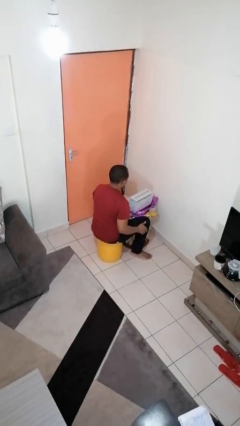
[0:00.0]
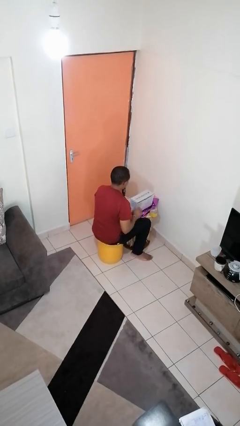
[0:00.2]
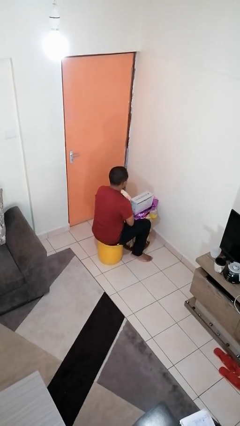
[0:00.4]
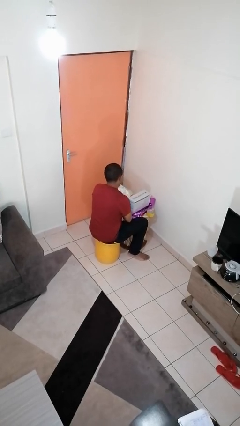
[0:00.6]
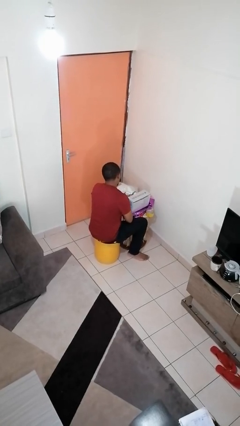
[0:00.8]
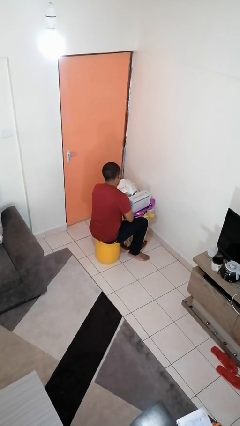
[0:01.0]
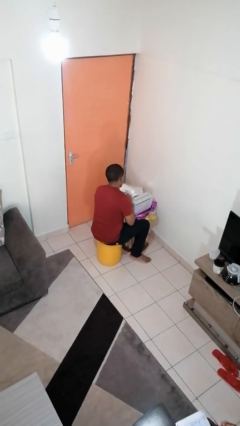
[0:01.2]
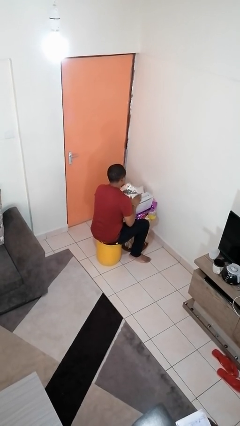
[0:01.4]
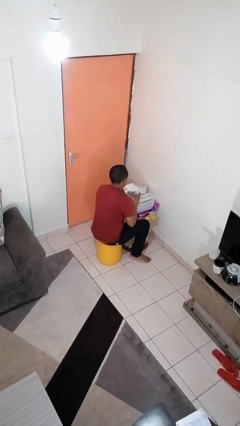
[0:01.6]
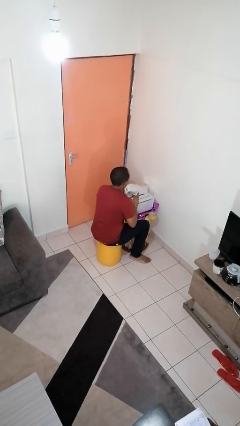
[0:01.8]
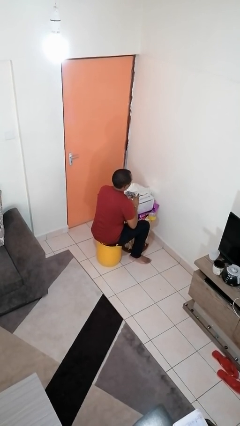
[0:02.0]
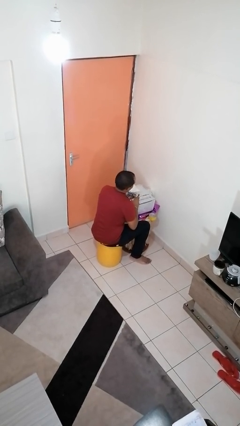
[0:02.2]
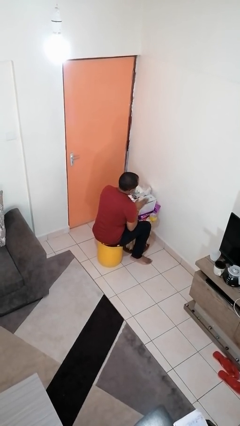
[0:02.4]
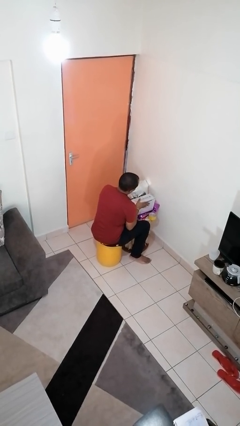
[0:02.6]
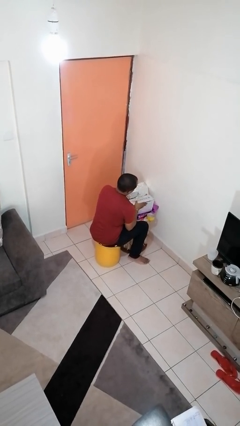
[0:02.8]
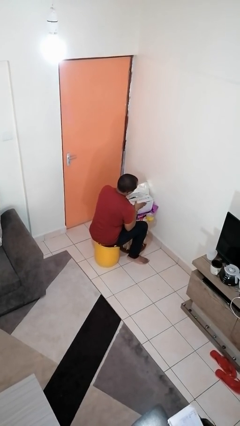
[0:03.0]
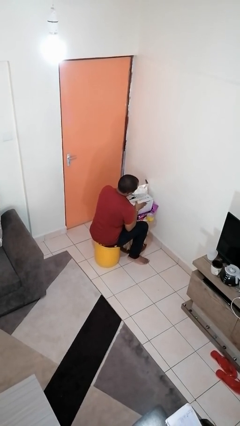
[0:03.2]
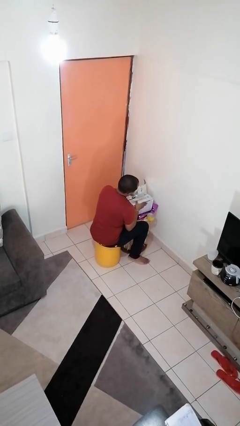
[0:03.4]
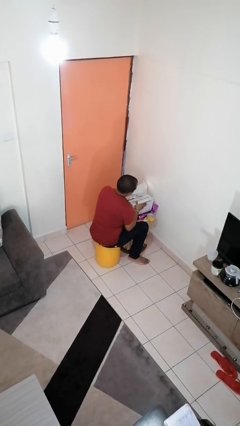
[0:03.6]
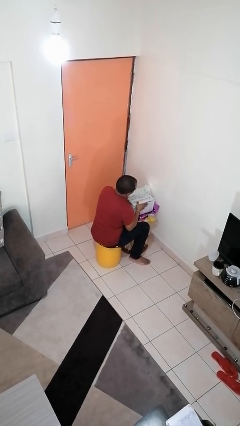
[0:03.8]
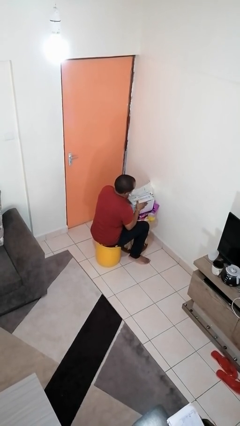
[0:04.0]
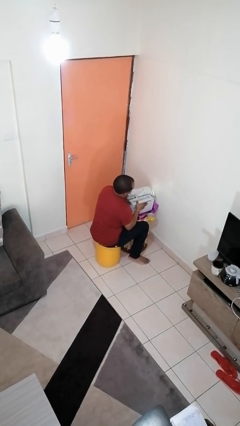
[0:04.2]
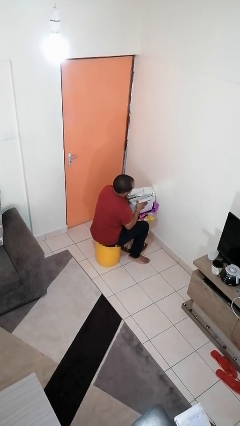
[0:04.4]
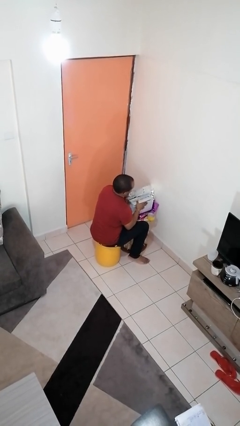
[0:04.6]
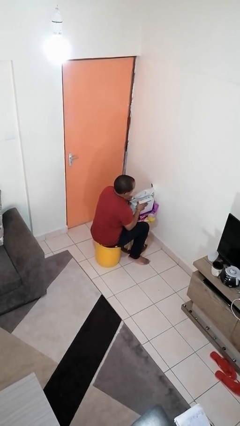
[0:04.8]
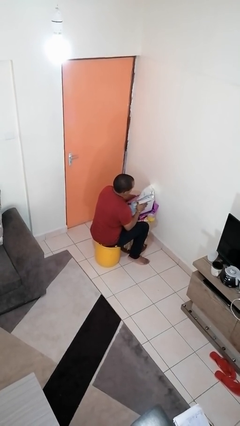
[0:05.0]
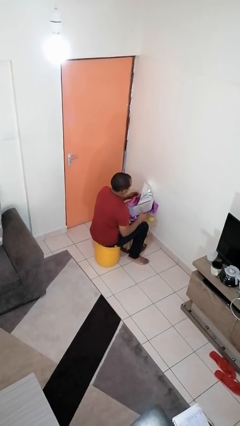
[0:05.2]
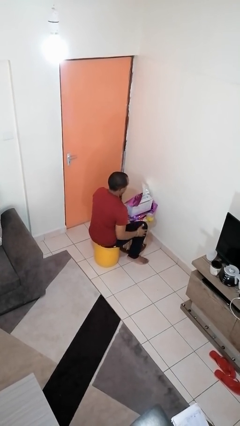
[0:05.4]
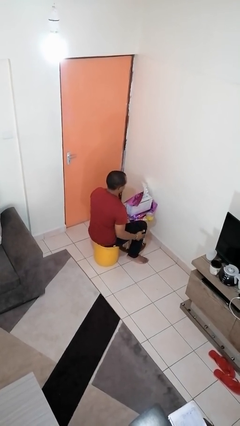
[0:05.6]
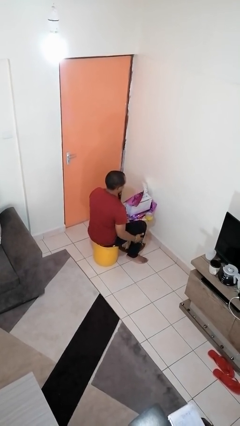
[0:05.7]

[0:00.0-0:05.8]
person wraps box

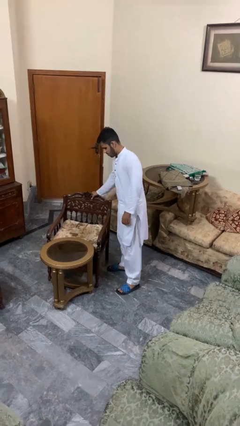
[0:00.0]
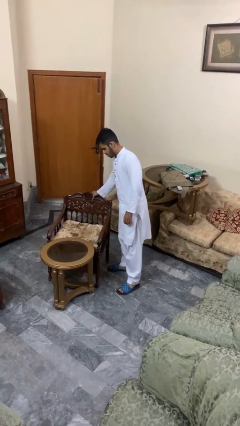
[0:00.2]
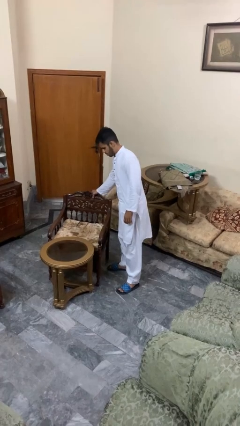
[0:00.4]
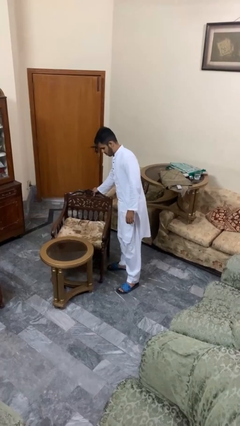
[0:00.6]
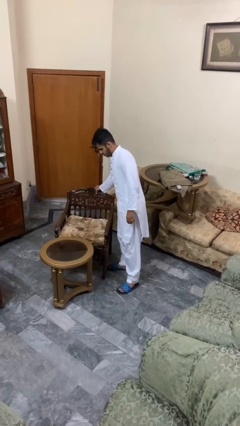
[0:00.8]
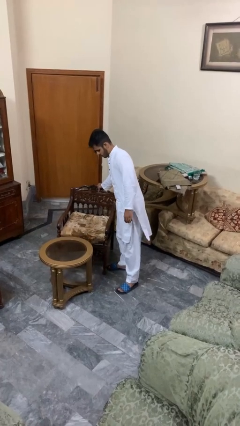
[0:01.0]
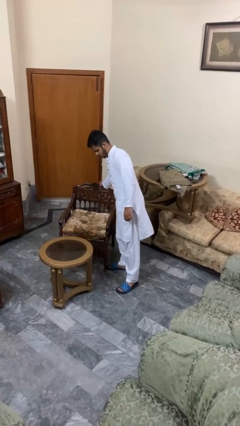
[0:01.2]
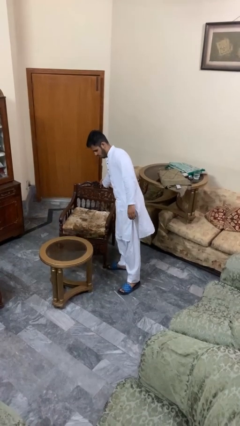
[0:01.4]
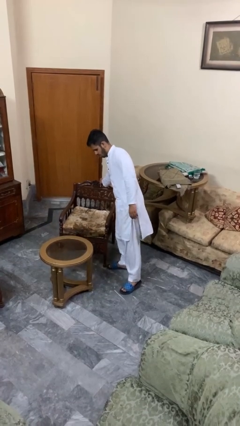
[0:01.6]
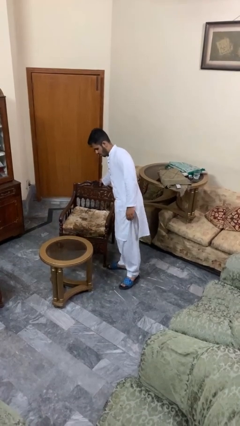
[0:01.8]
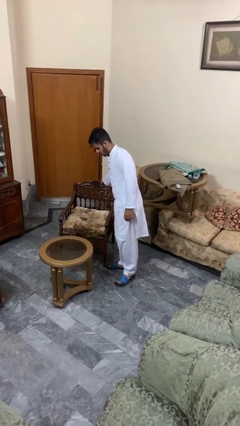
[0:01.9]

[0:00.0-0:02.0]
person pulls out chair

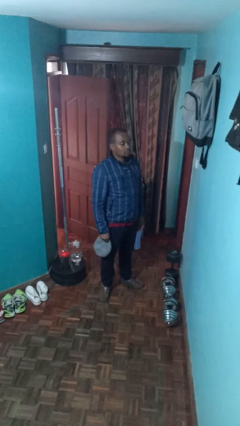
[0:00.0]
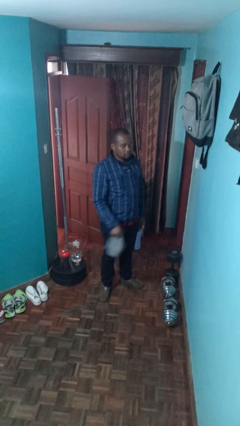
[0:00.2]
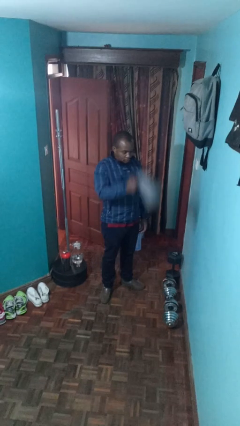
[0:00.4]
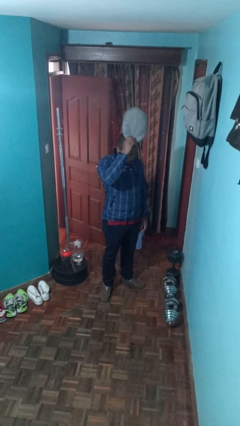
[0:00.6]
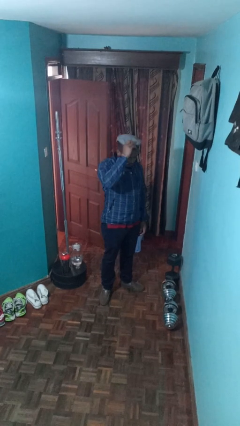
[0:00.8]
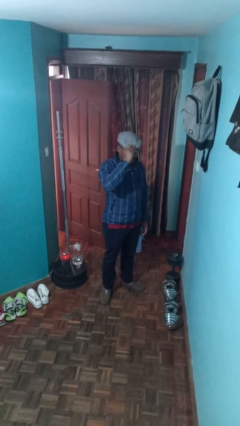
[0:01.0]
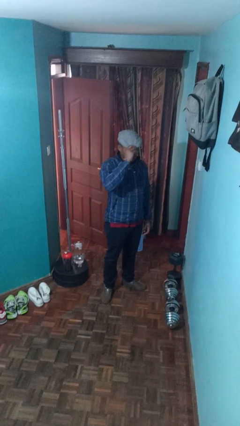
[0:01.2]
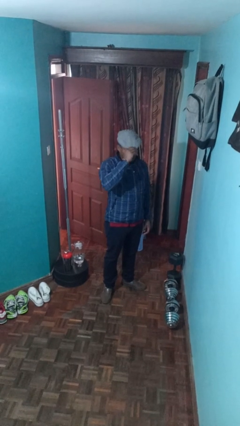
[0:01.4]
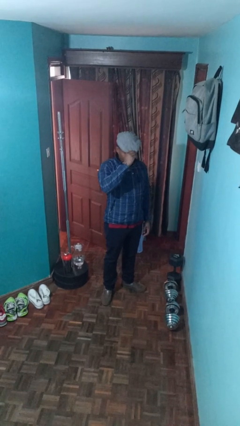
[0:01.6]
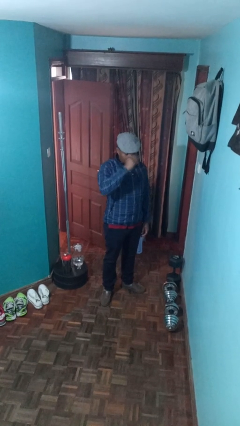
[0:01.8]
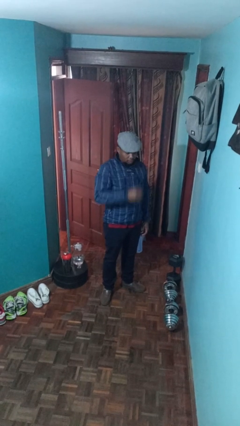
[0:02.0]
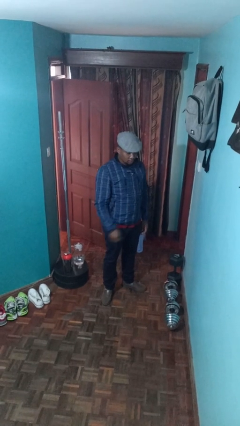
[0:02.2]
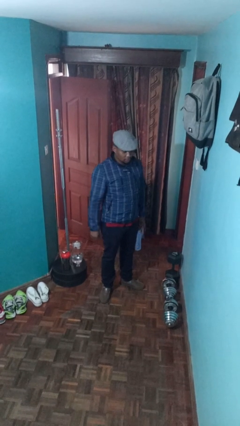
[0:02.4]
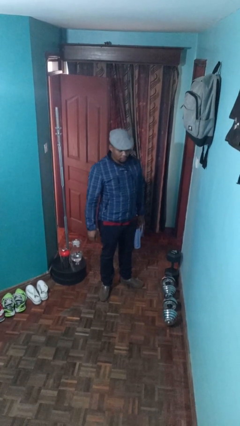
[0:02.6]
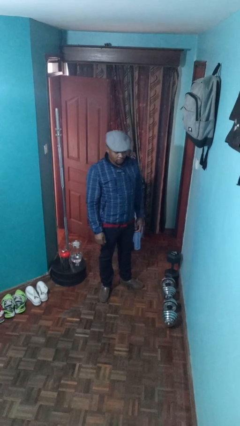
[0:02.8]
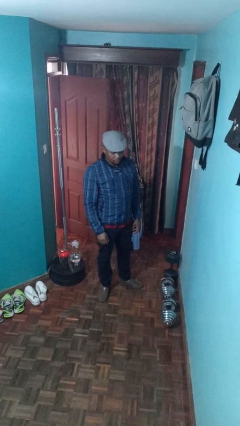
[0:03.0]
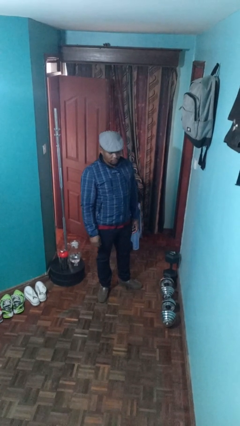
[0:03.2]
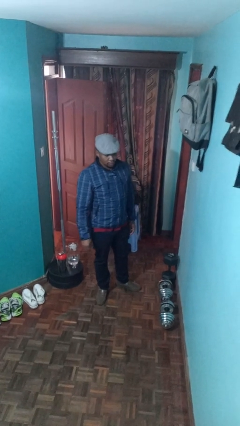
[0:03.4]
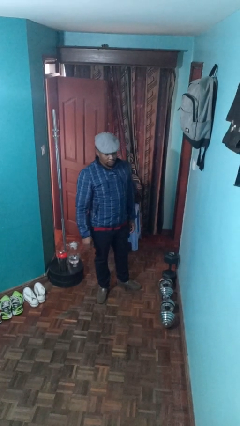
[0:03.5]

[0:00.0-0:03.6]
person puts on hat

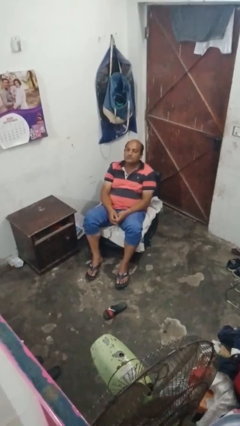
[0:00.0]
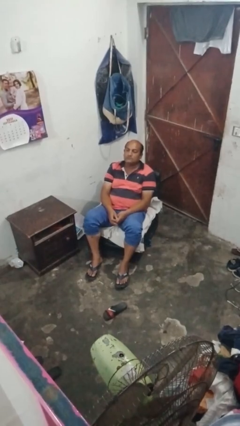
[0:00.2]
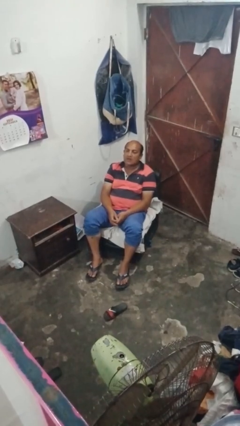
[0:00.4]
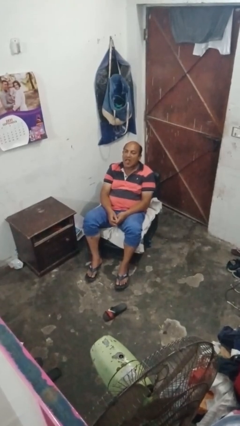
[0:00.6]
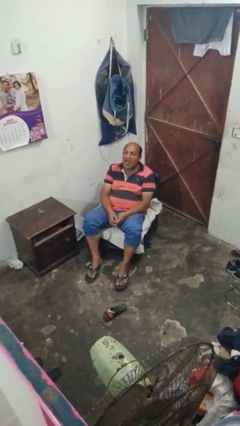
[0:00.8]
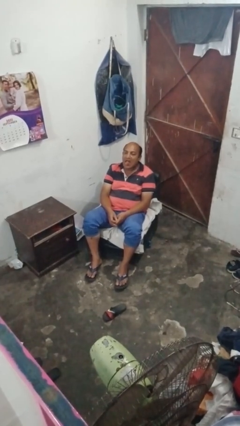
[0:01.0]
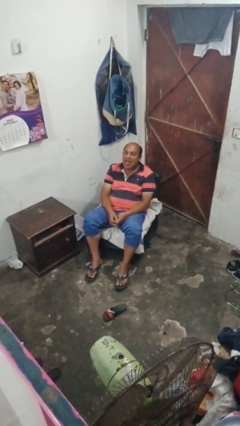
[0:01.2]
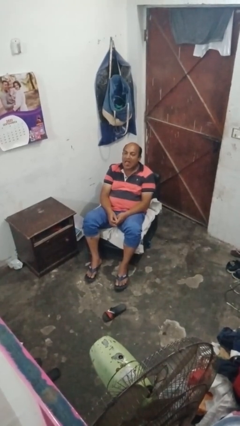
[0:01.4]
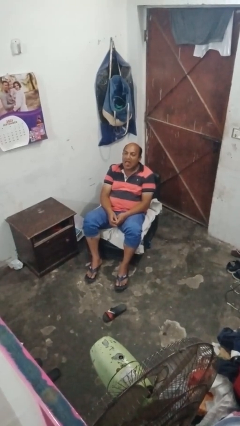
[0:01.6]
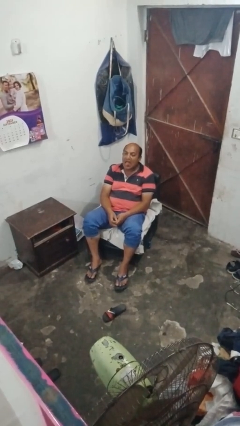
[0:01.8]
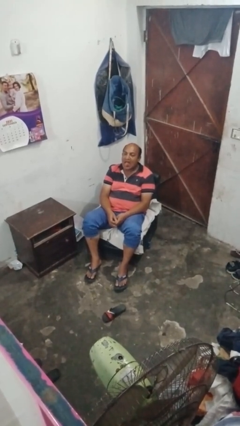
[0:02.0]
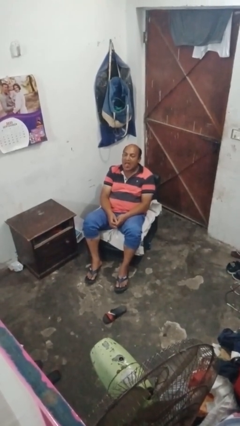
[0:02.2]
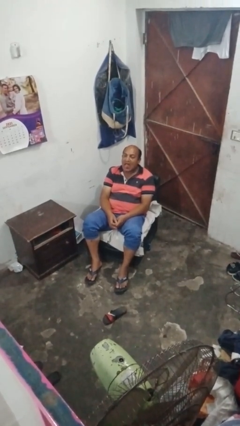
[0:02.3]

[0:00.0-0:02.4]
person sticks out tongue

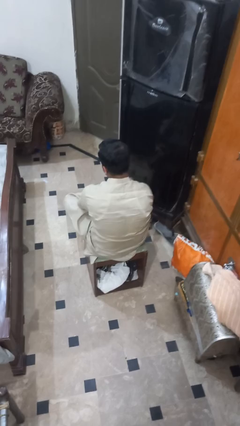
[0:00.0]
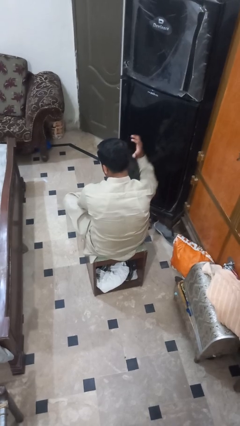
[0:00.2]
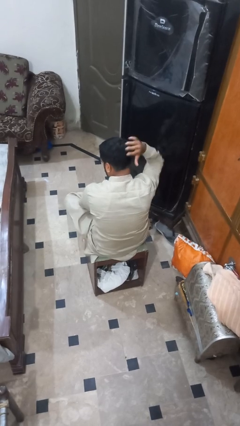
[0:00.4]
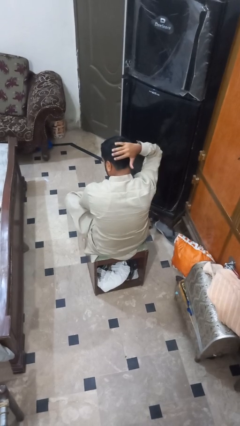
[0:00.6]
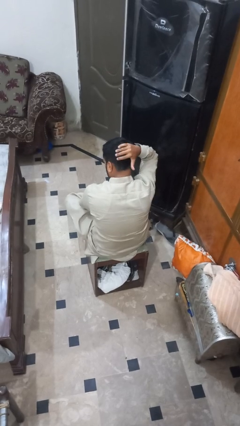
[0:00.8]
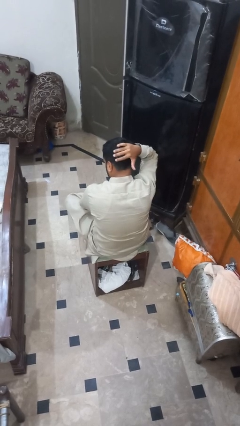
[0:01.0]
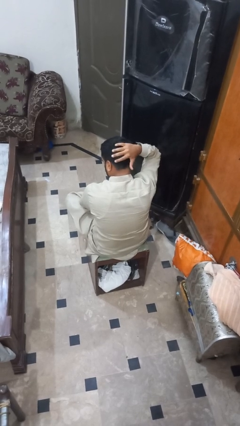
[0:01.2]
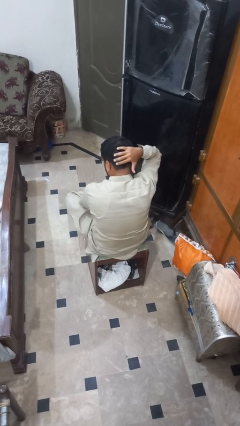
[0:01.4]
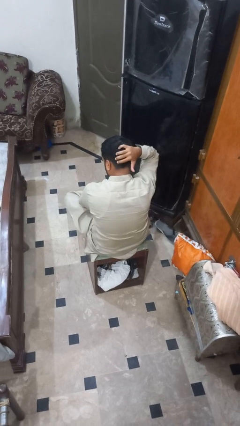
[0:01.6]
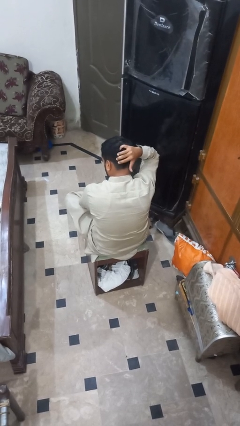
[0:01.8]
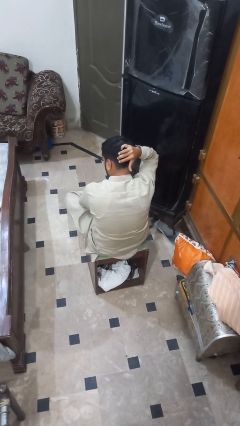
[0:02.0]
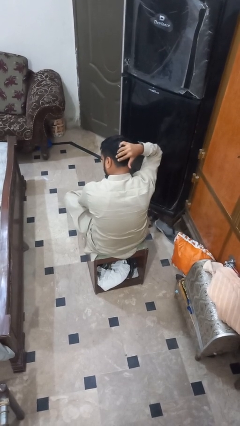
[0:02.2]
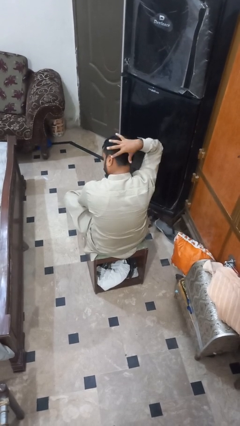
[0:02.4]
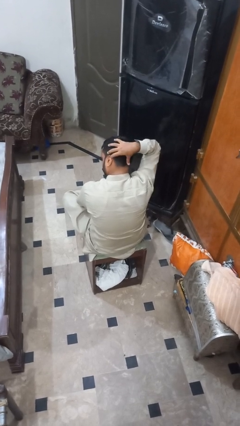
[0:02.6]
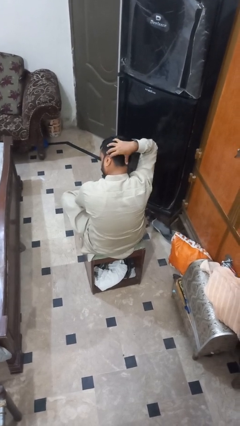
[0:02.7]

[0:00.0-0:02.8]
person strokes hair

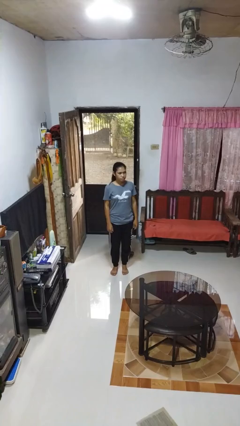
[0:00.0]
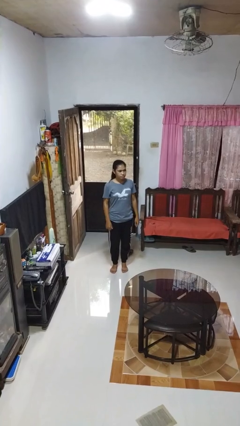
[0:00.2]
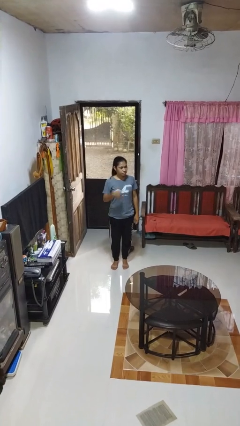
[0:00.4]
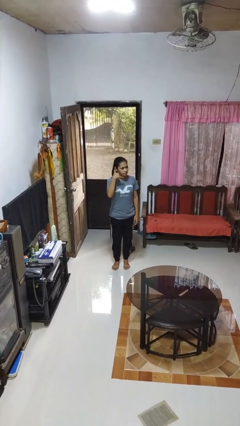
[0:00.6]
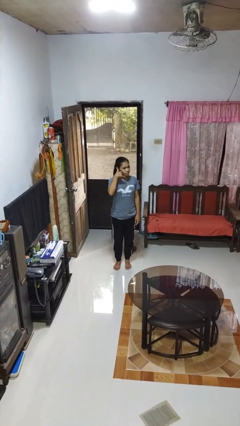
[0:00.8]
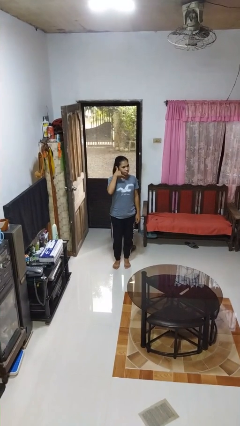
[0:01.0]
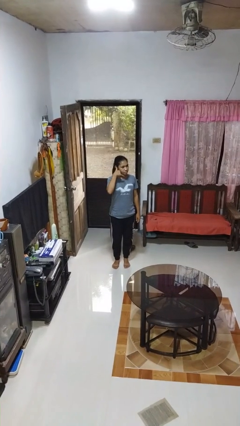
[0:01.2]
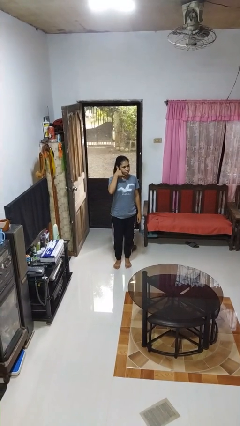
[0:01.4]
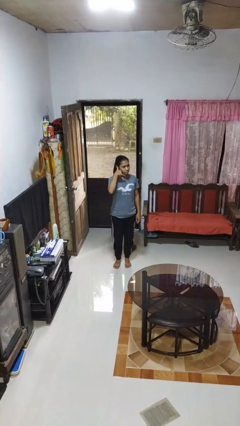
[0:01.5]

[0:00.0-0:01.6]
person gestures call me
